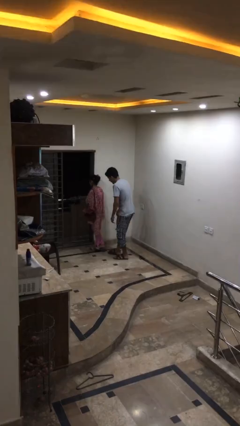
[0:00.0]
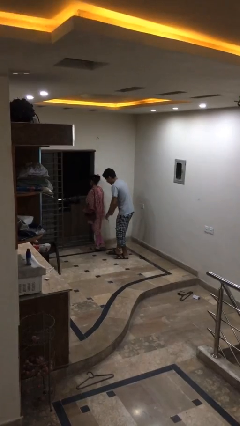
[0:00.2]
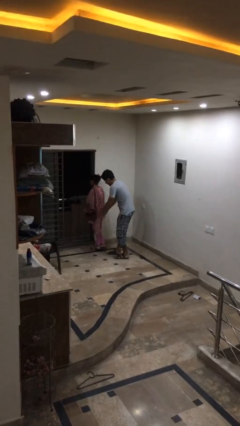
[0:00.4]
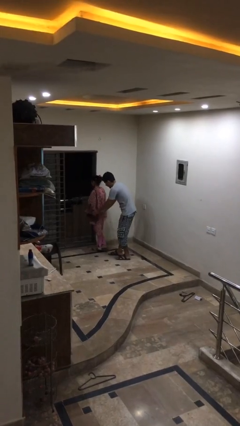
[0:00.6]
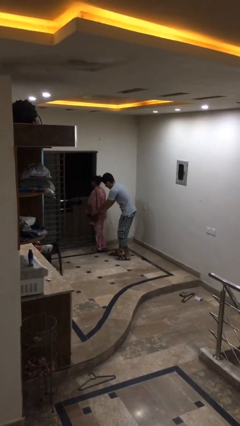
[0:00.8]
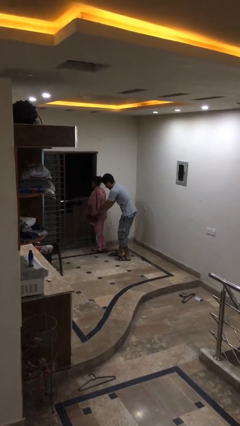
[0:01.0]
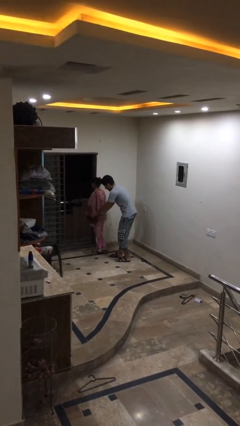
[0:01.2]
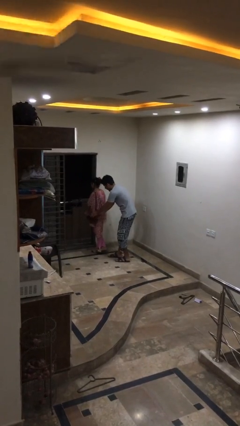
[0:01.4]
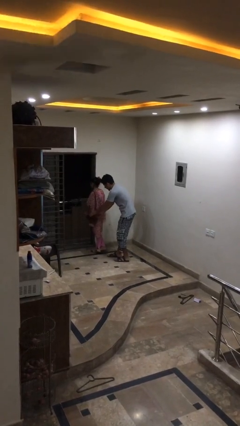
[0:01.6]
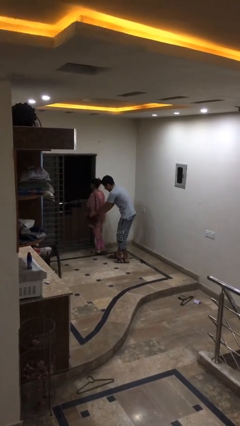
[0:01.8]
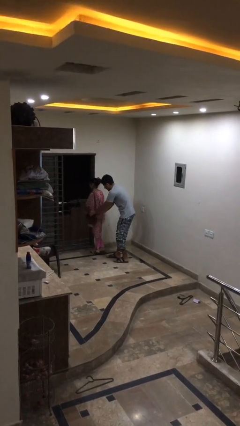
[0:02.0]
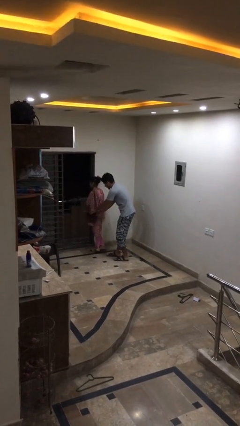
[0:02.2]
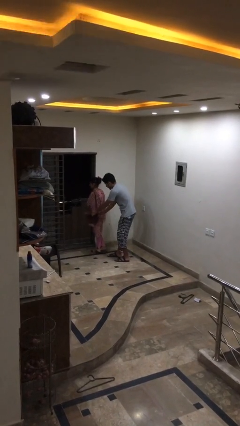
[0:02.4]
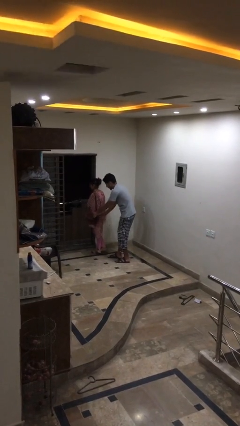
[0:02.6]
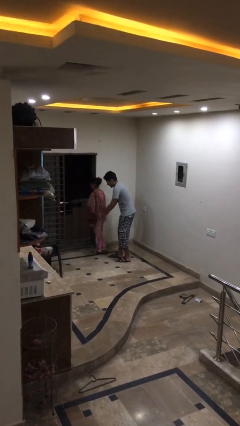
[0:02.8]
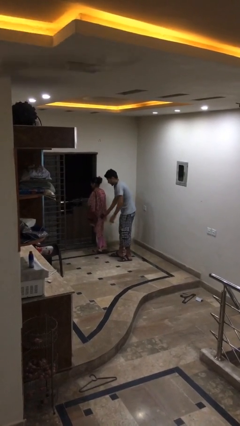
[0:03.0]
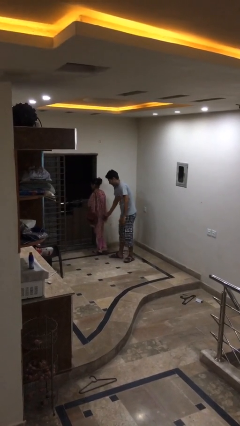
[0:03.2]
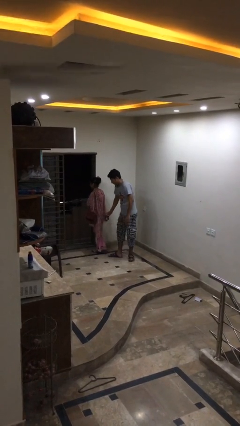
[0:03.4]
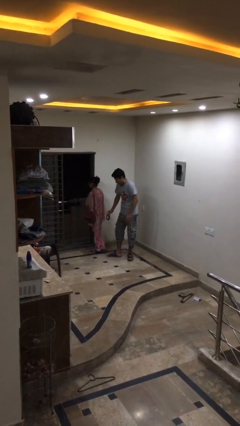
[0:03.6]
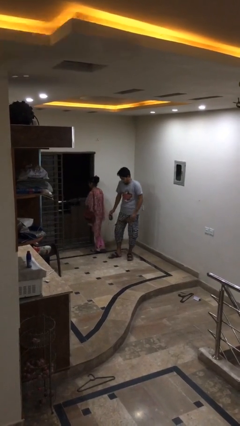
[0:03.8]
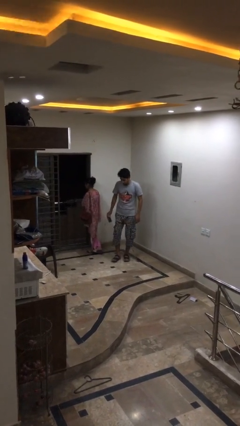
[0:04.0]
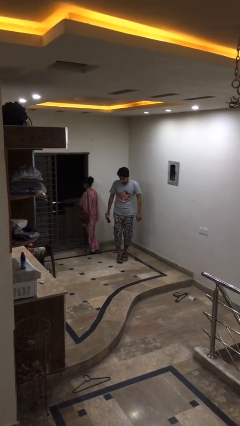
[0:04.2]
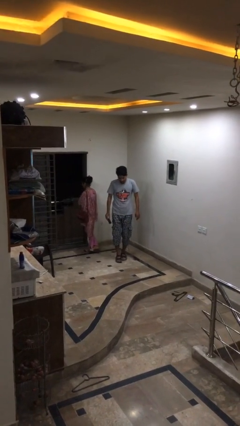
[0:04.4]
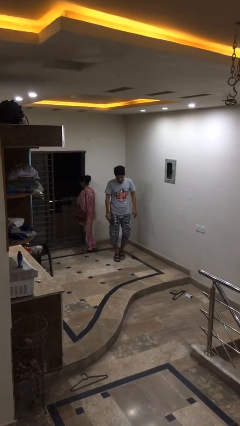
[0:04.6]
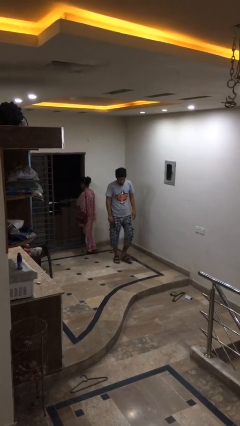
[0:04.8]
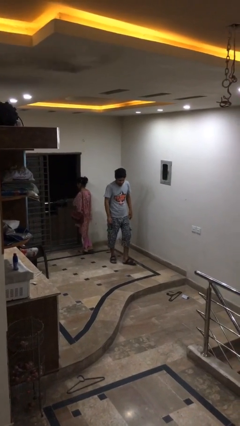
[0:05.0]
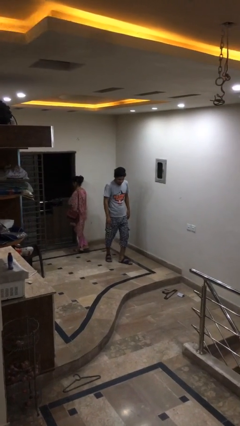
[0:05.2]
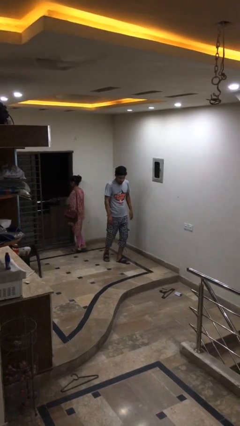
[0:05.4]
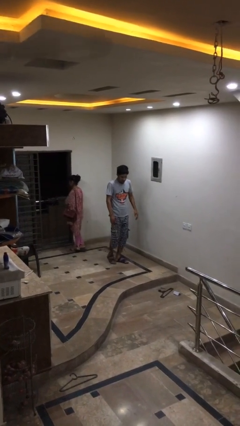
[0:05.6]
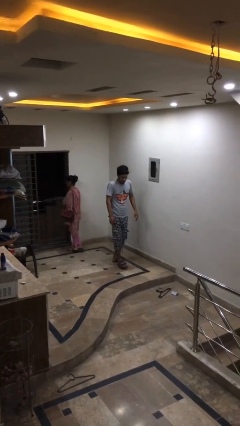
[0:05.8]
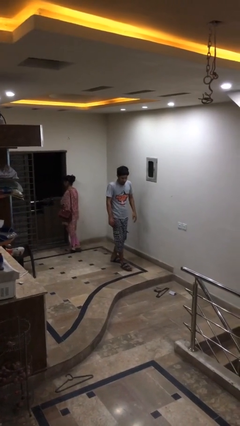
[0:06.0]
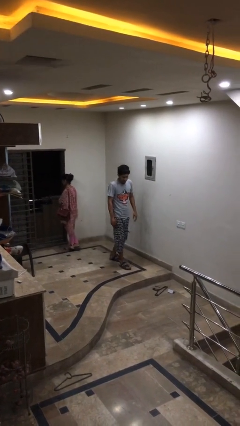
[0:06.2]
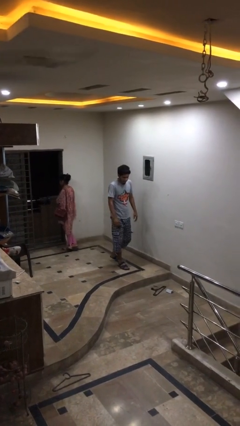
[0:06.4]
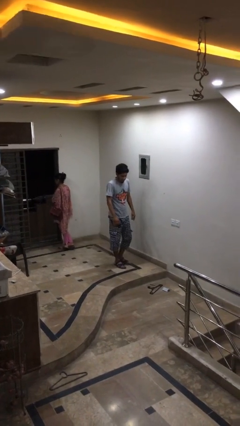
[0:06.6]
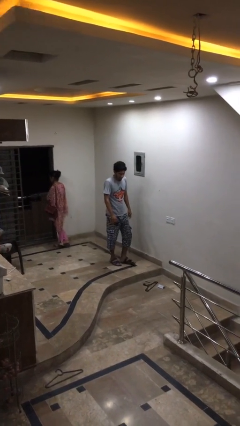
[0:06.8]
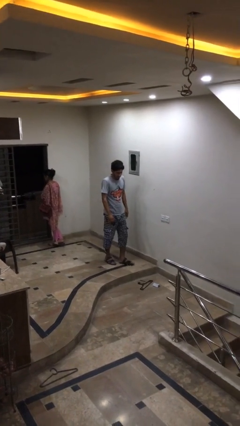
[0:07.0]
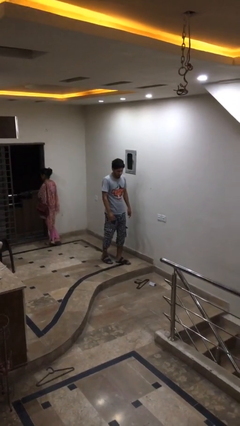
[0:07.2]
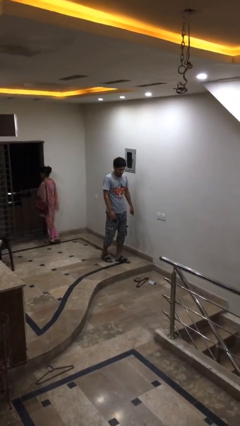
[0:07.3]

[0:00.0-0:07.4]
person steals object from person

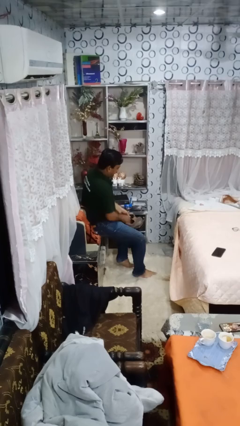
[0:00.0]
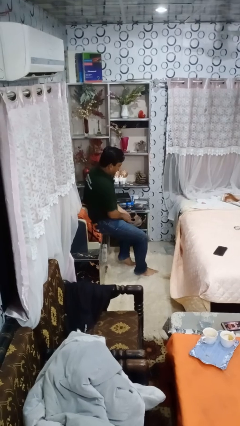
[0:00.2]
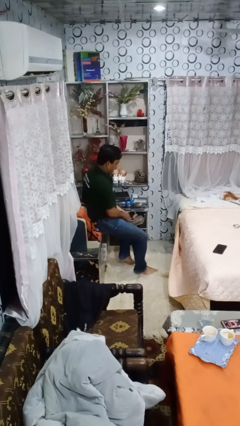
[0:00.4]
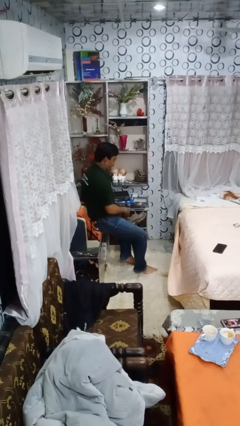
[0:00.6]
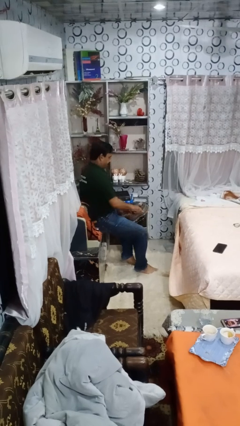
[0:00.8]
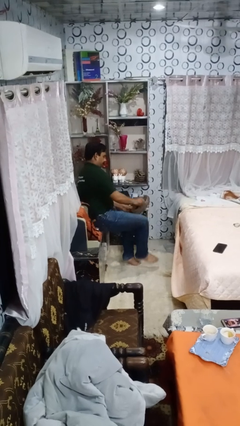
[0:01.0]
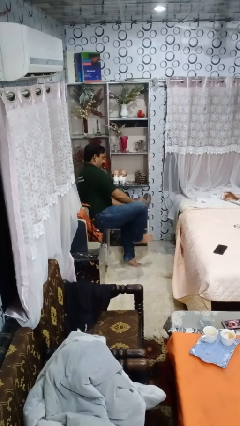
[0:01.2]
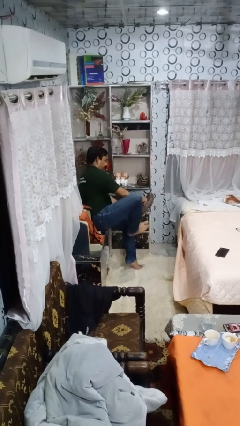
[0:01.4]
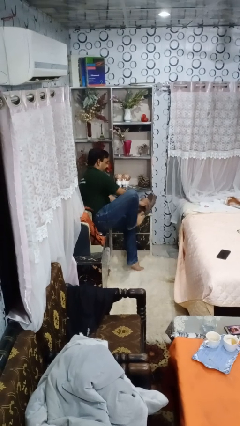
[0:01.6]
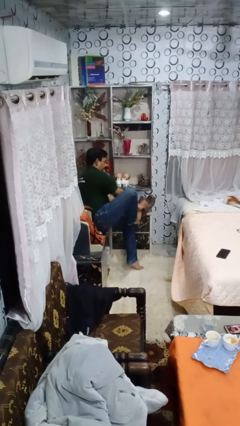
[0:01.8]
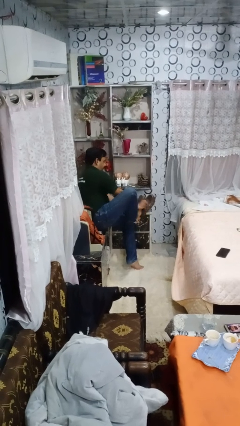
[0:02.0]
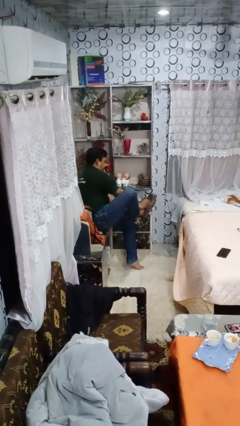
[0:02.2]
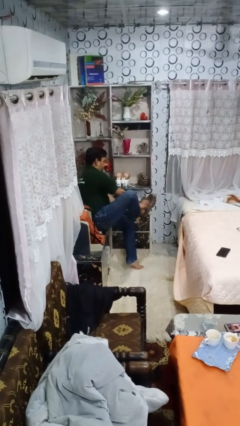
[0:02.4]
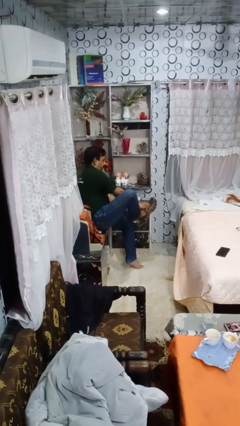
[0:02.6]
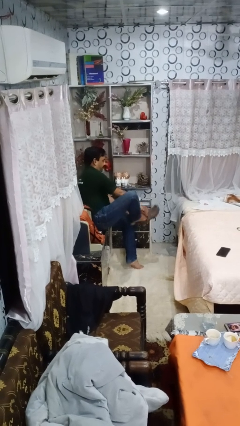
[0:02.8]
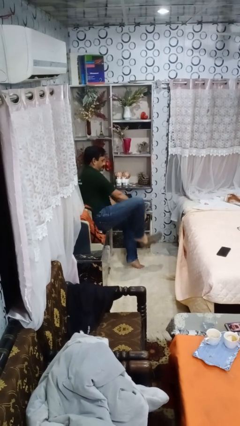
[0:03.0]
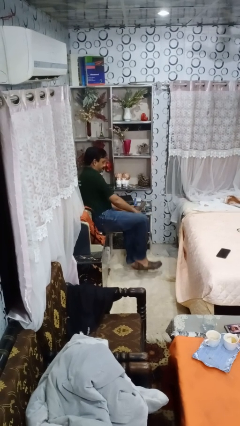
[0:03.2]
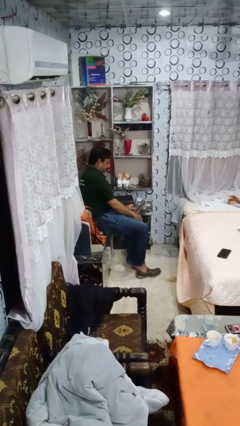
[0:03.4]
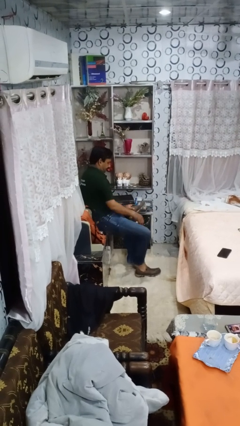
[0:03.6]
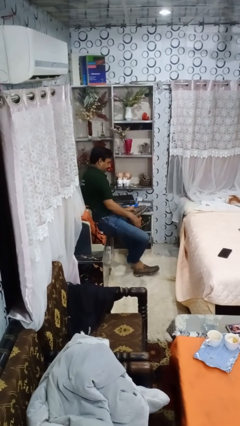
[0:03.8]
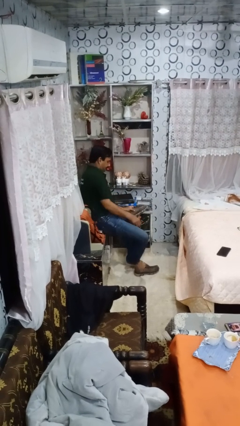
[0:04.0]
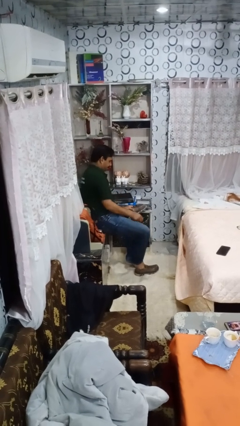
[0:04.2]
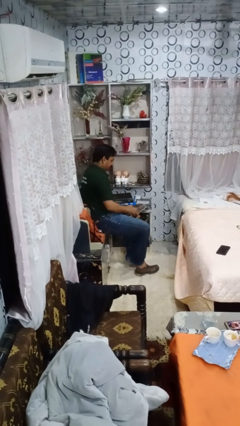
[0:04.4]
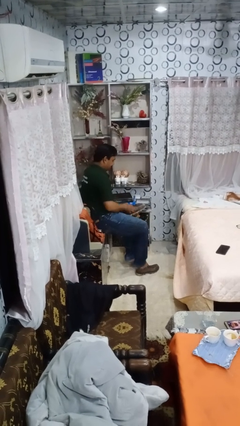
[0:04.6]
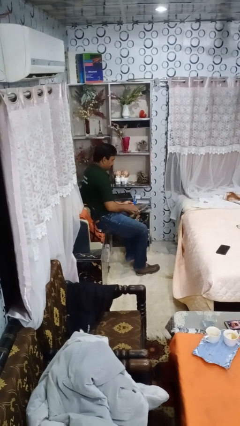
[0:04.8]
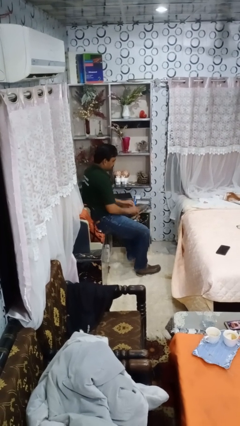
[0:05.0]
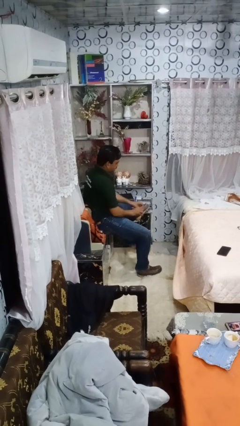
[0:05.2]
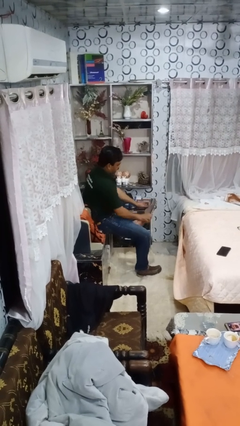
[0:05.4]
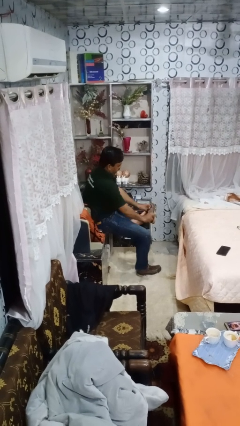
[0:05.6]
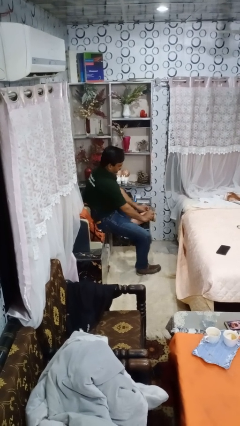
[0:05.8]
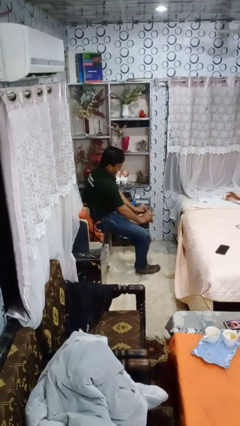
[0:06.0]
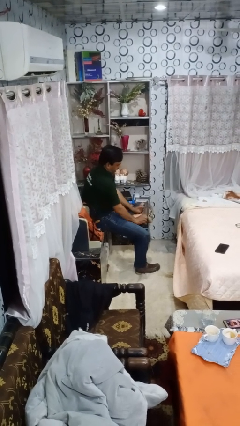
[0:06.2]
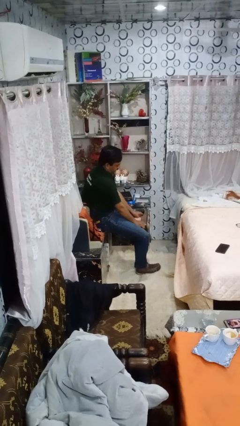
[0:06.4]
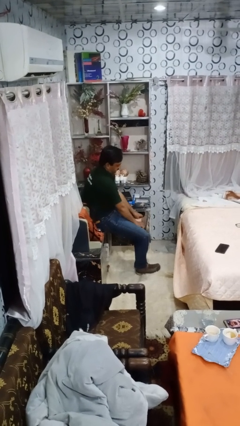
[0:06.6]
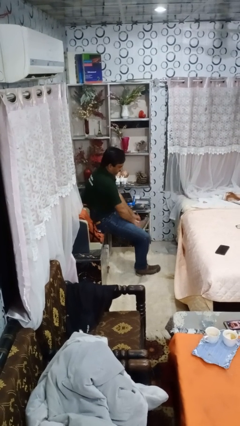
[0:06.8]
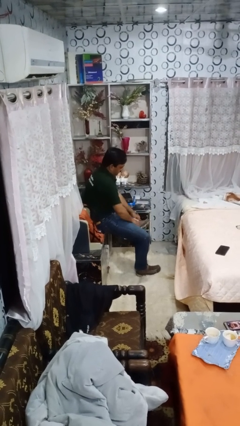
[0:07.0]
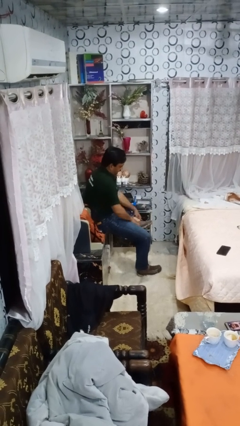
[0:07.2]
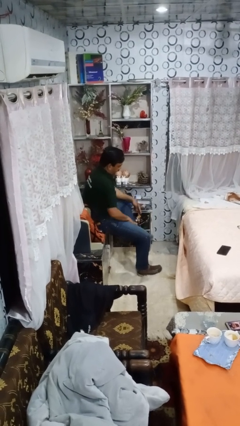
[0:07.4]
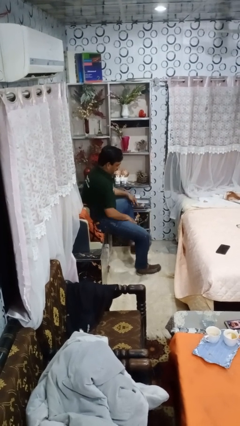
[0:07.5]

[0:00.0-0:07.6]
person puts on shoes

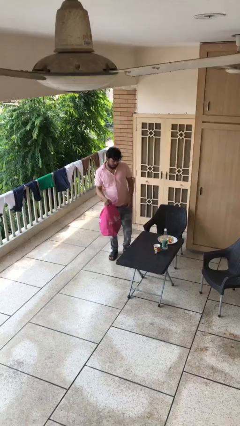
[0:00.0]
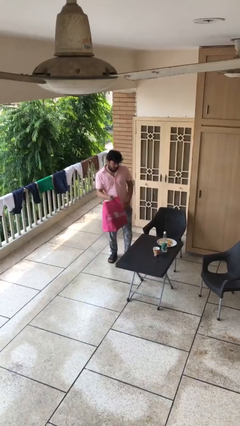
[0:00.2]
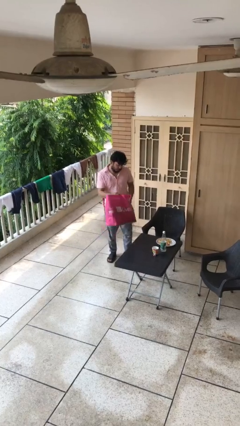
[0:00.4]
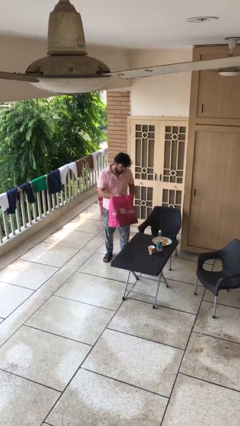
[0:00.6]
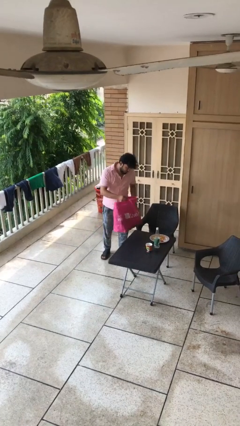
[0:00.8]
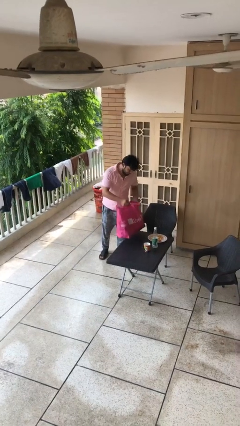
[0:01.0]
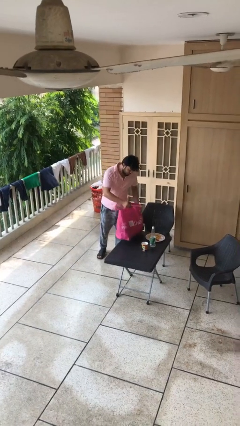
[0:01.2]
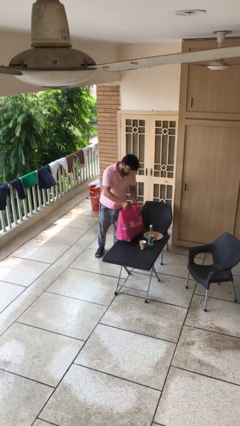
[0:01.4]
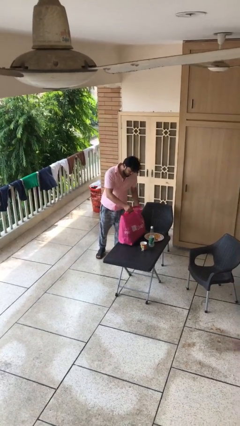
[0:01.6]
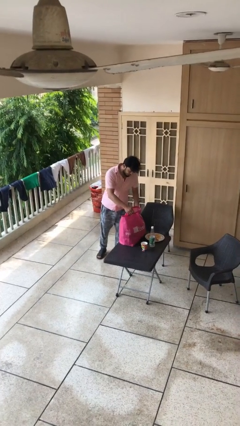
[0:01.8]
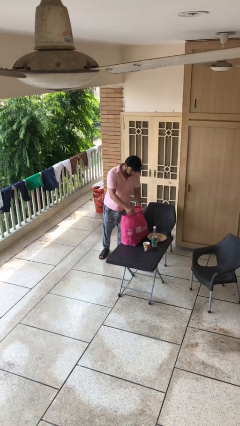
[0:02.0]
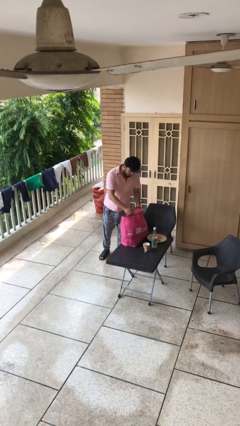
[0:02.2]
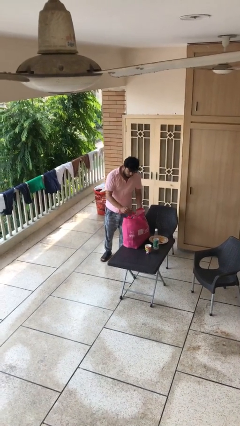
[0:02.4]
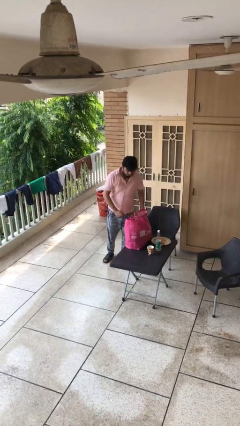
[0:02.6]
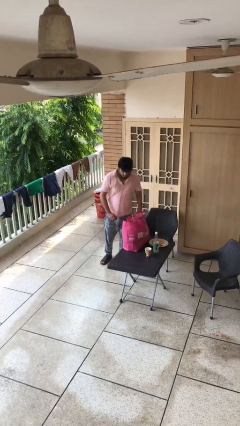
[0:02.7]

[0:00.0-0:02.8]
person puts down object on table

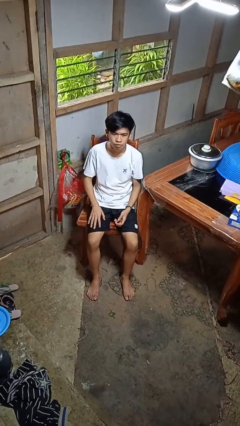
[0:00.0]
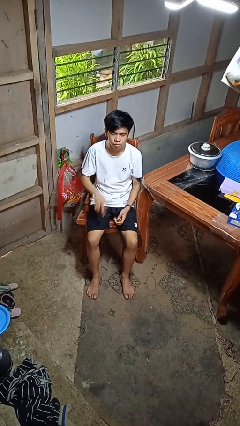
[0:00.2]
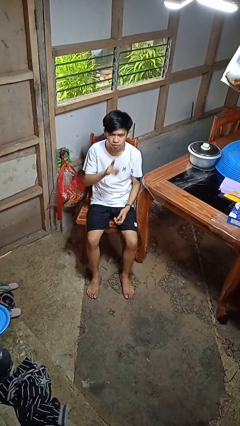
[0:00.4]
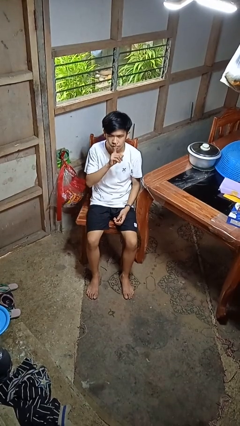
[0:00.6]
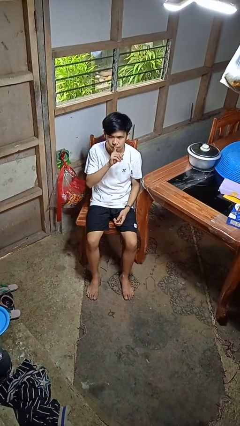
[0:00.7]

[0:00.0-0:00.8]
person gestures be quiet
